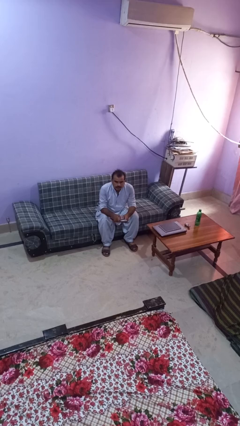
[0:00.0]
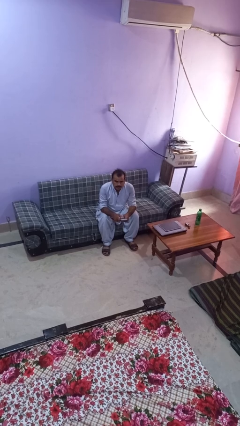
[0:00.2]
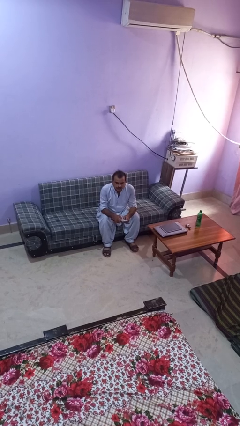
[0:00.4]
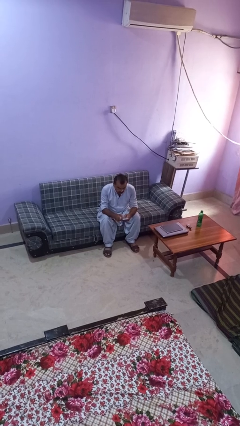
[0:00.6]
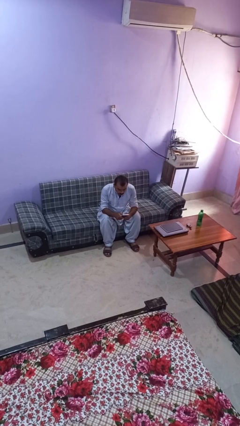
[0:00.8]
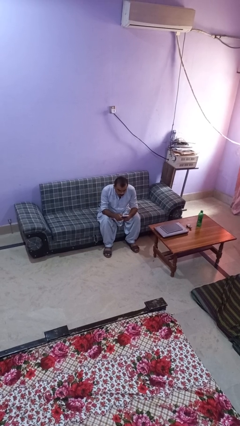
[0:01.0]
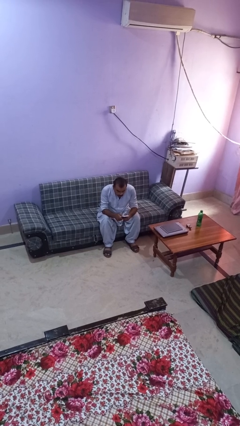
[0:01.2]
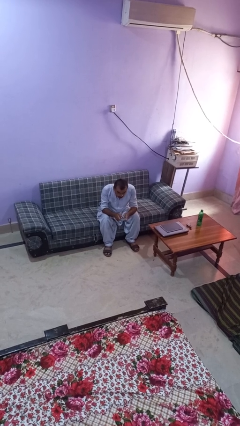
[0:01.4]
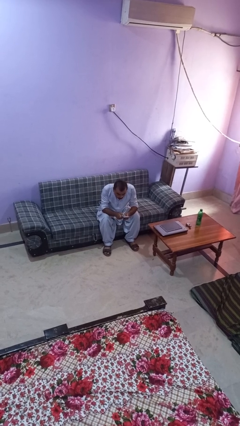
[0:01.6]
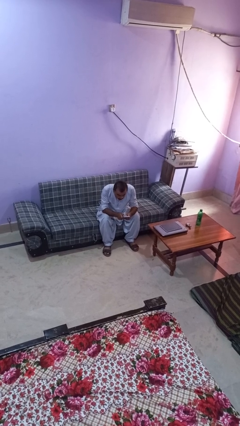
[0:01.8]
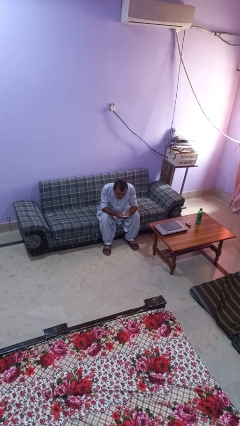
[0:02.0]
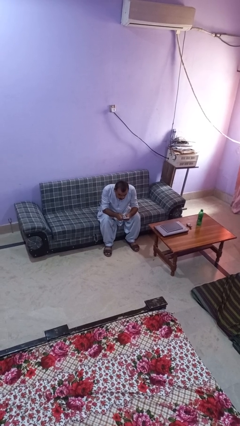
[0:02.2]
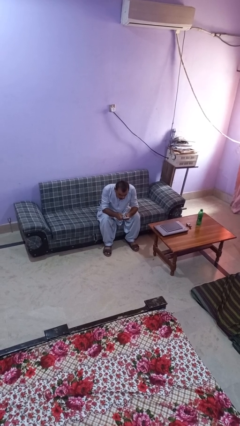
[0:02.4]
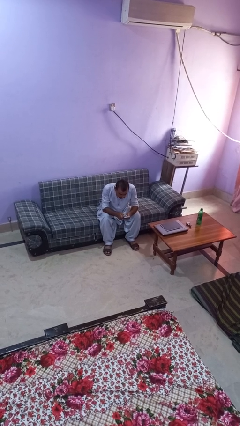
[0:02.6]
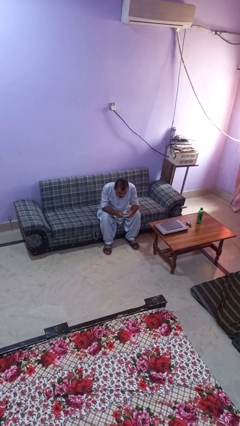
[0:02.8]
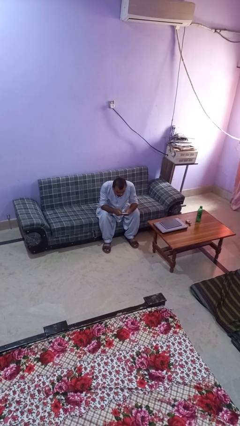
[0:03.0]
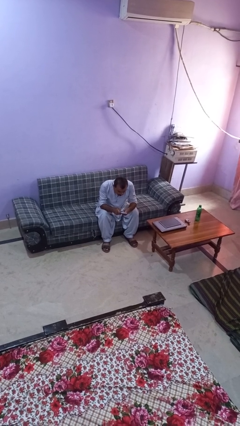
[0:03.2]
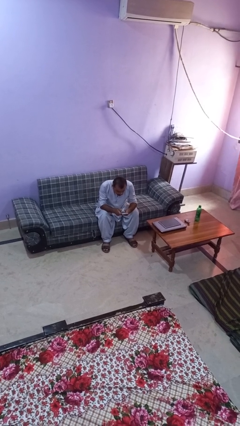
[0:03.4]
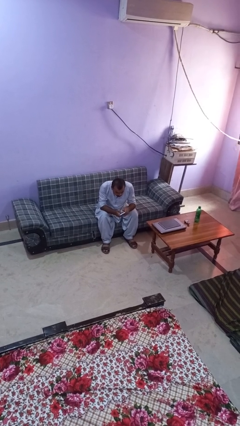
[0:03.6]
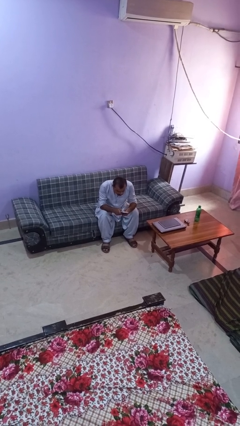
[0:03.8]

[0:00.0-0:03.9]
person interacts with handheld game

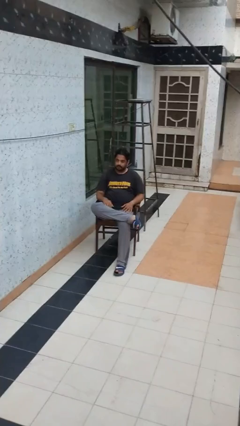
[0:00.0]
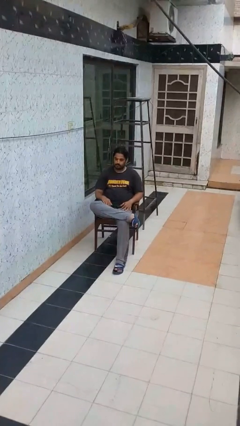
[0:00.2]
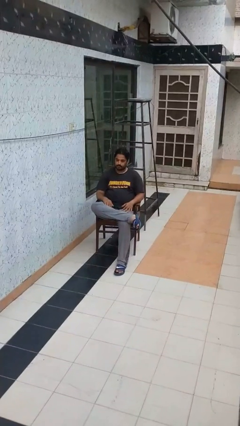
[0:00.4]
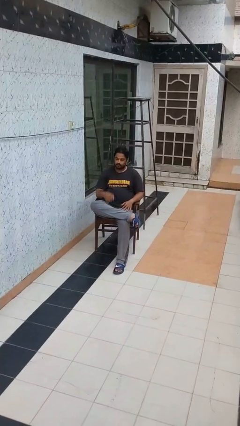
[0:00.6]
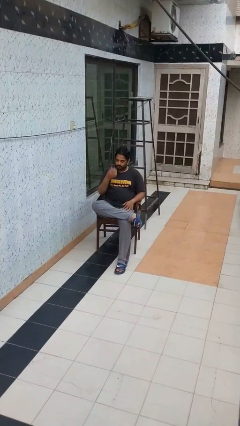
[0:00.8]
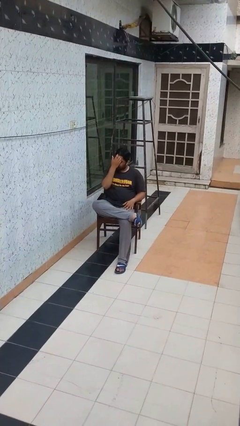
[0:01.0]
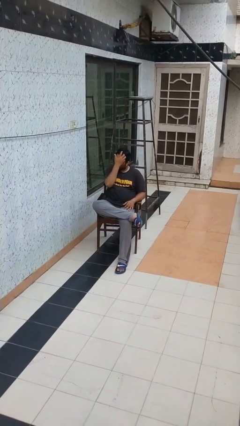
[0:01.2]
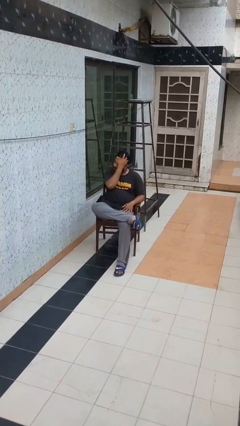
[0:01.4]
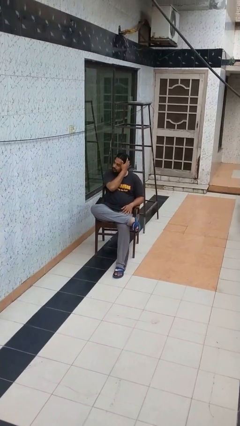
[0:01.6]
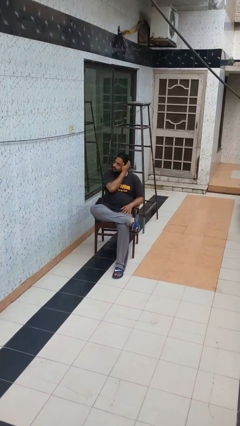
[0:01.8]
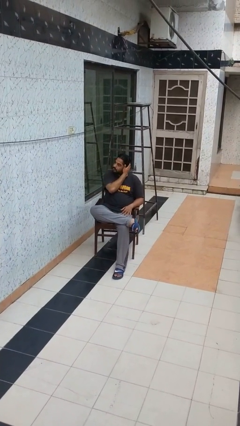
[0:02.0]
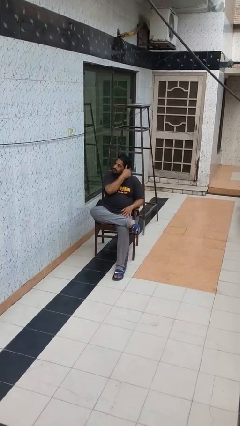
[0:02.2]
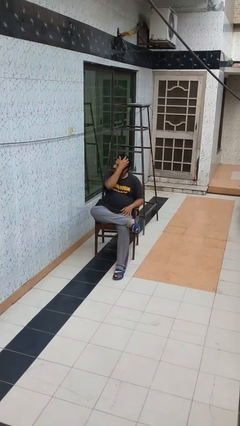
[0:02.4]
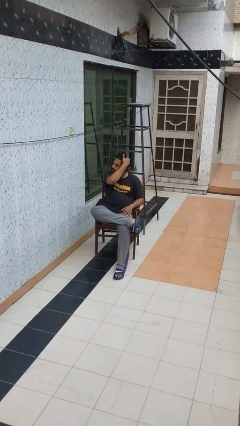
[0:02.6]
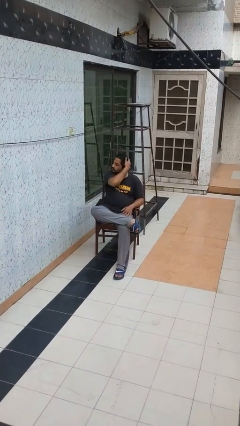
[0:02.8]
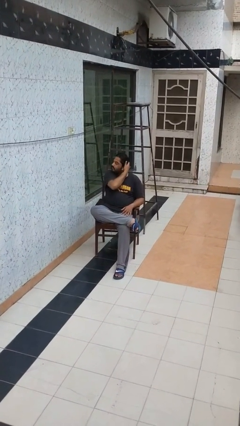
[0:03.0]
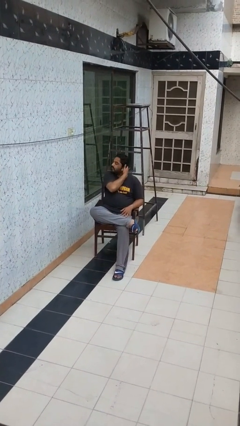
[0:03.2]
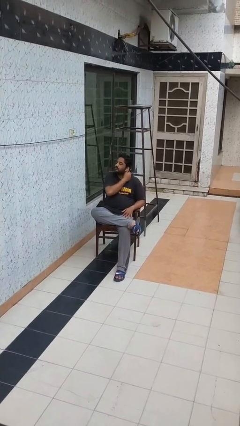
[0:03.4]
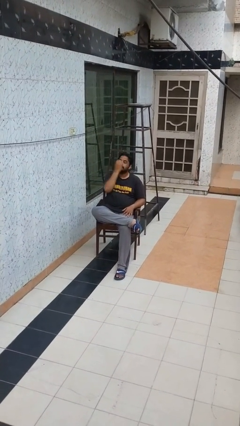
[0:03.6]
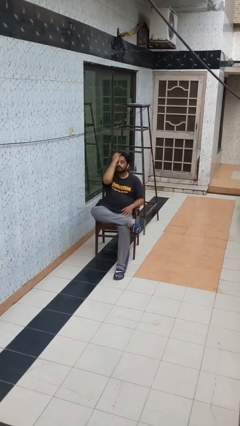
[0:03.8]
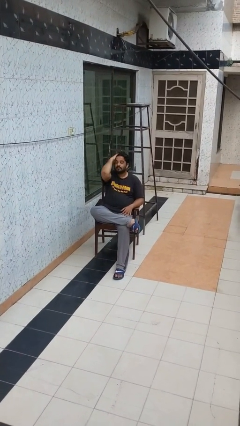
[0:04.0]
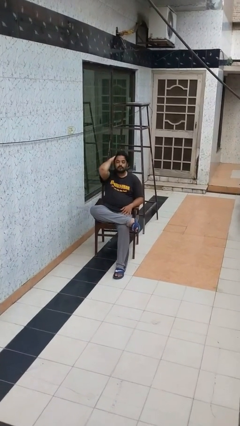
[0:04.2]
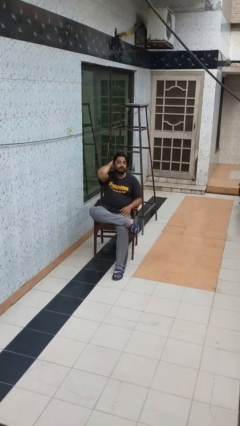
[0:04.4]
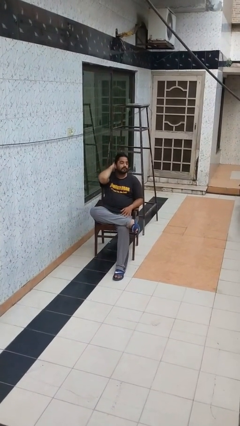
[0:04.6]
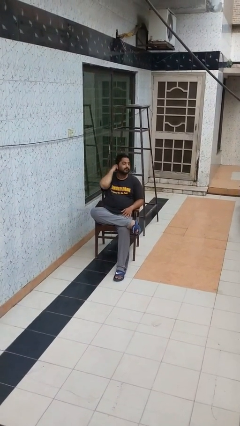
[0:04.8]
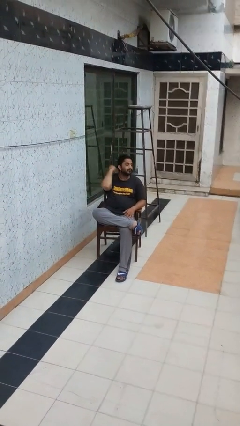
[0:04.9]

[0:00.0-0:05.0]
person strokes hair

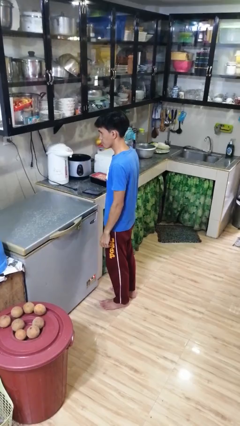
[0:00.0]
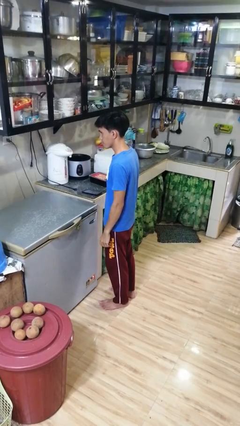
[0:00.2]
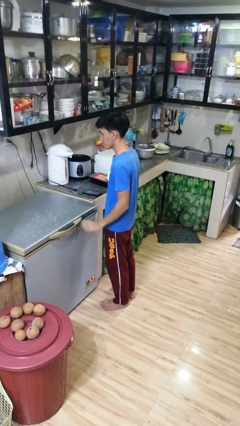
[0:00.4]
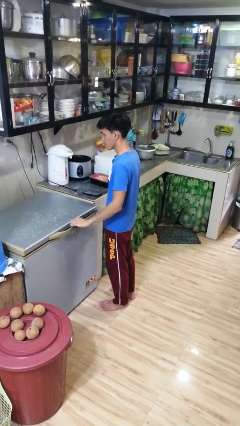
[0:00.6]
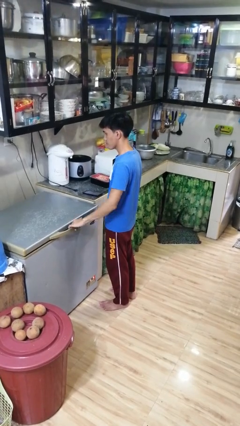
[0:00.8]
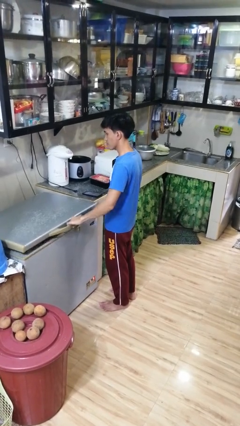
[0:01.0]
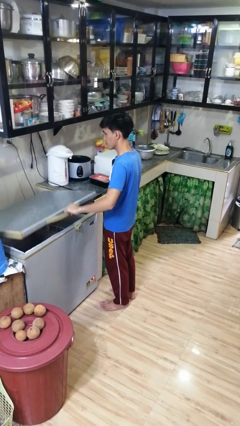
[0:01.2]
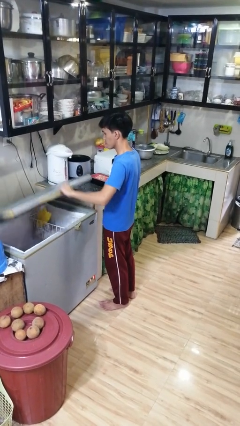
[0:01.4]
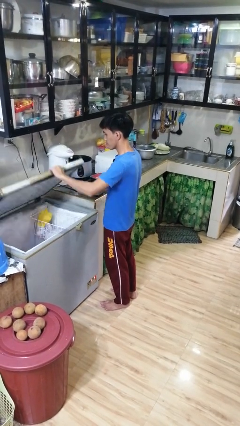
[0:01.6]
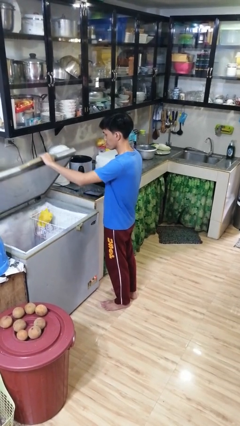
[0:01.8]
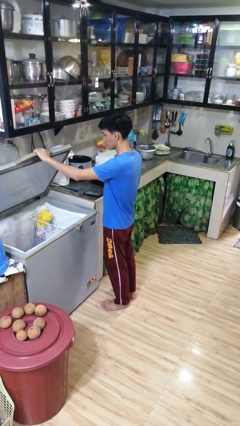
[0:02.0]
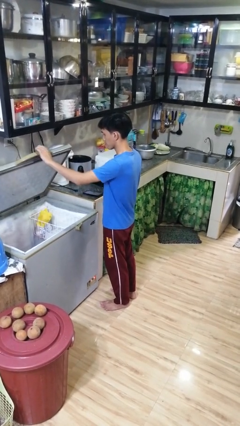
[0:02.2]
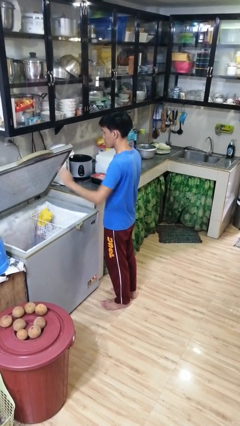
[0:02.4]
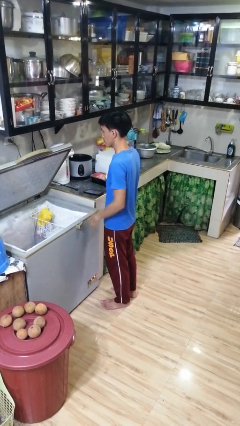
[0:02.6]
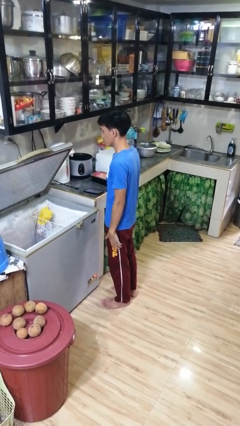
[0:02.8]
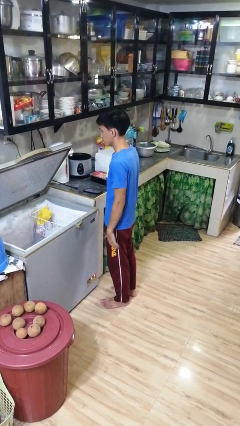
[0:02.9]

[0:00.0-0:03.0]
person opens refrigerator

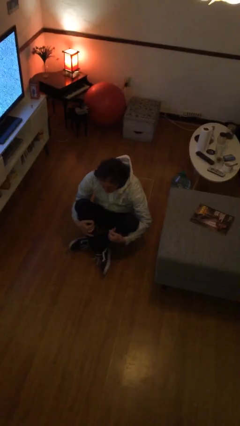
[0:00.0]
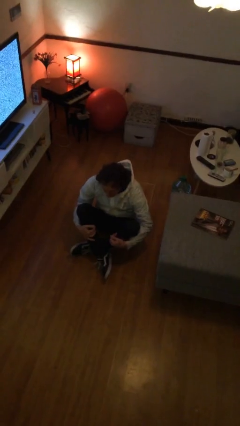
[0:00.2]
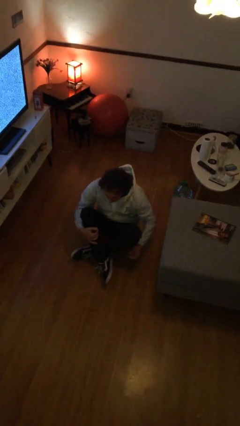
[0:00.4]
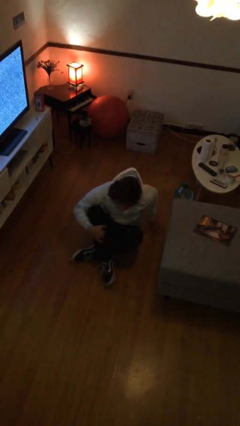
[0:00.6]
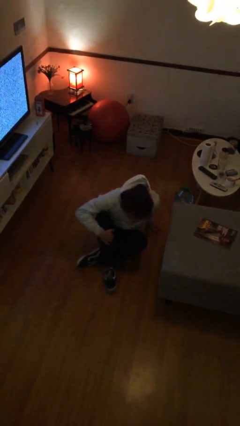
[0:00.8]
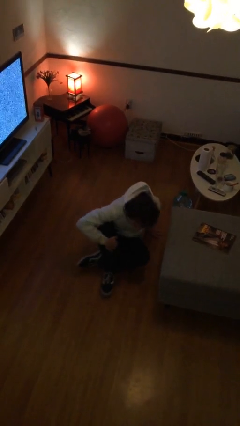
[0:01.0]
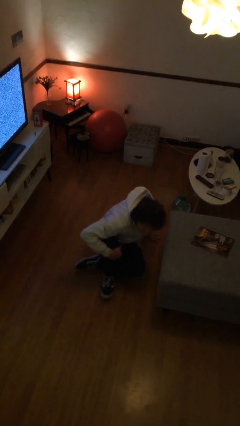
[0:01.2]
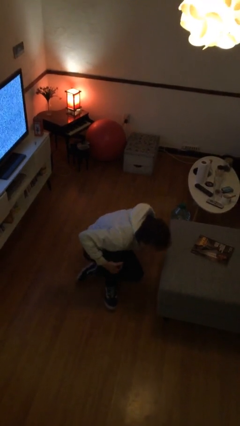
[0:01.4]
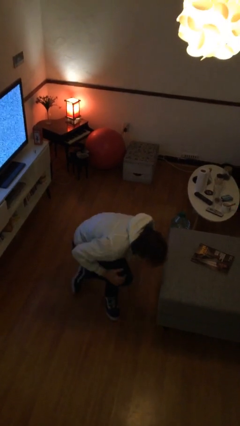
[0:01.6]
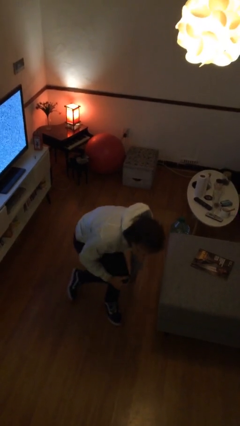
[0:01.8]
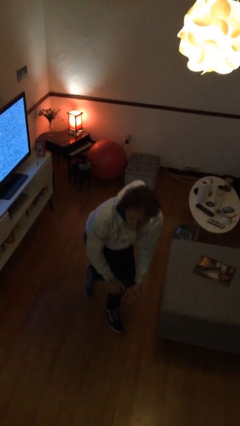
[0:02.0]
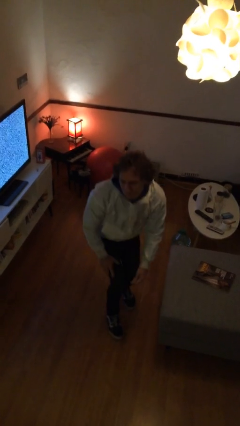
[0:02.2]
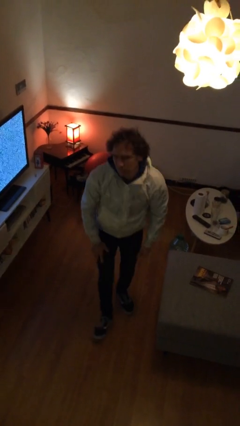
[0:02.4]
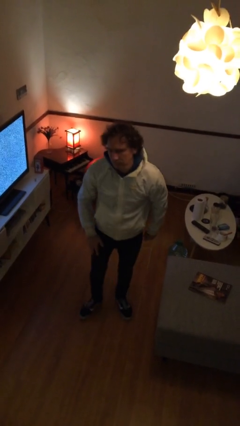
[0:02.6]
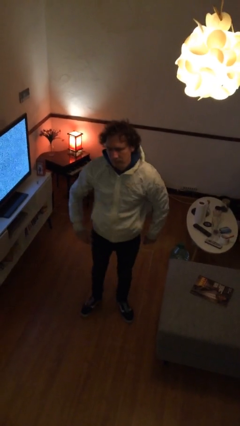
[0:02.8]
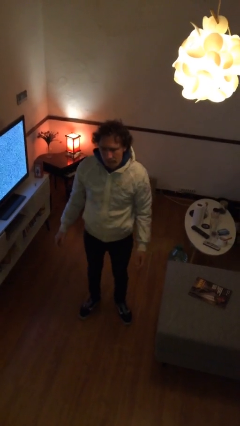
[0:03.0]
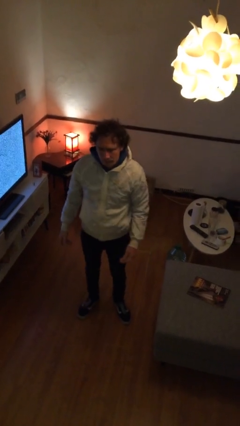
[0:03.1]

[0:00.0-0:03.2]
person stands up from floor

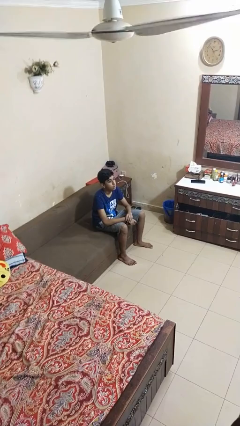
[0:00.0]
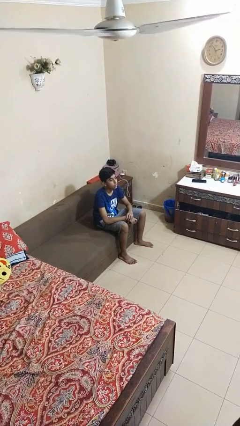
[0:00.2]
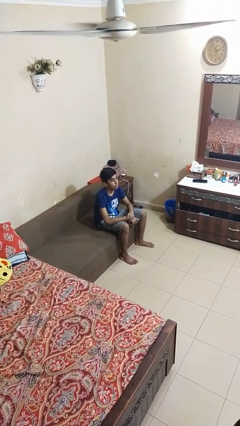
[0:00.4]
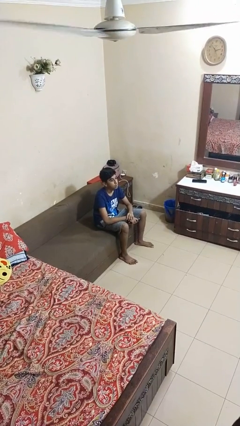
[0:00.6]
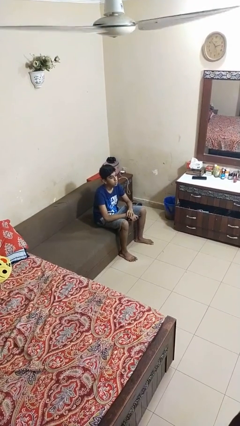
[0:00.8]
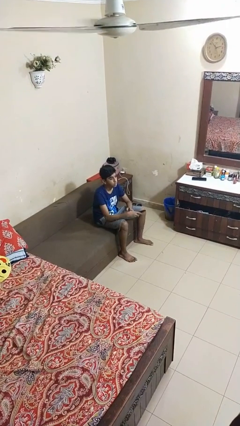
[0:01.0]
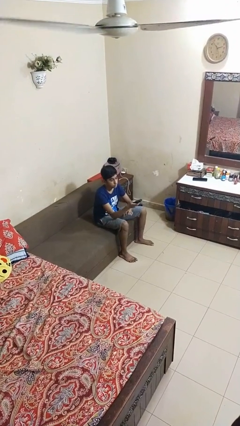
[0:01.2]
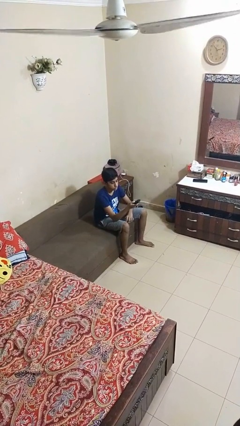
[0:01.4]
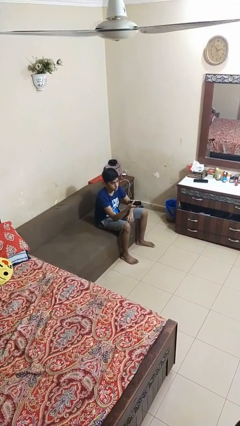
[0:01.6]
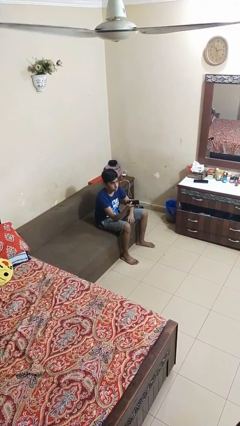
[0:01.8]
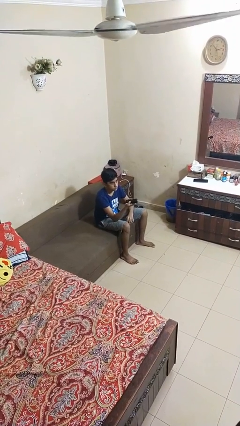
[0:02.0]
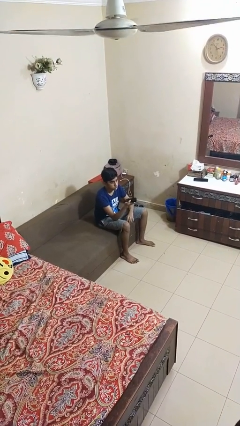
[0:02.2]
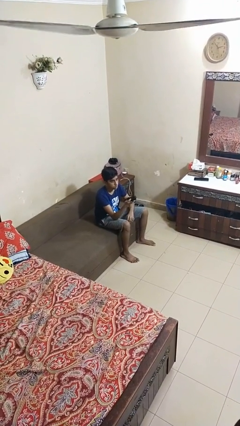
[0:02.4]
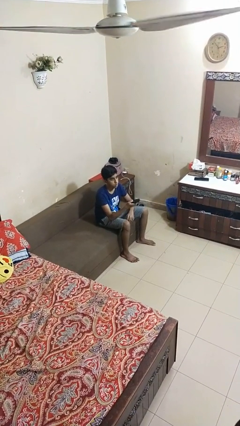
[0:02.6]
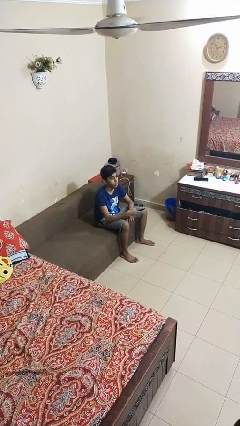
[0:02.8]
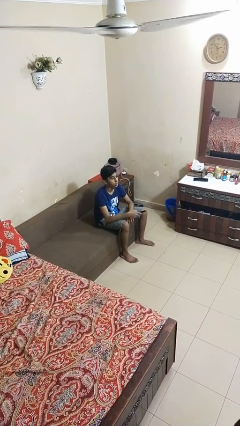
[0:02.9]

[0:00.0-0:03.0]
person uses television remote
